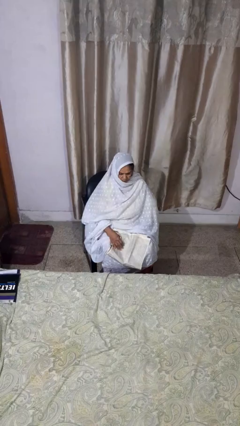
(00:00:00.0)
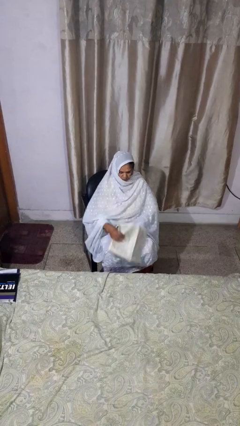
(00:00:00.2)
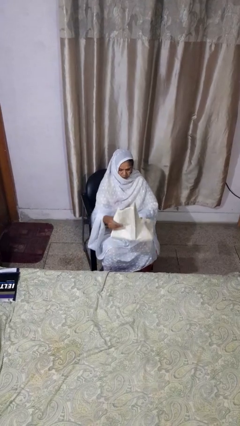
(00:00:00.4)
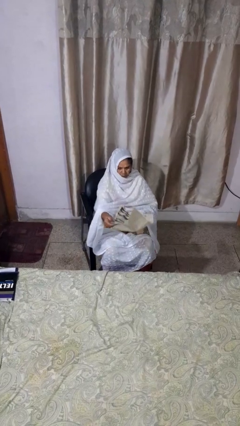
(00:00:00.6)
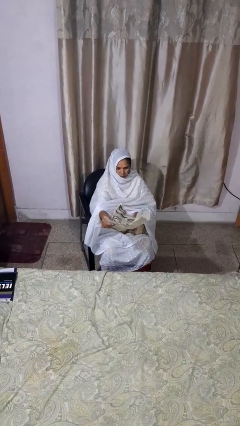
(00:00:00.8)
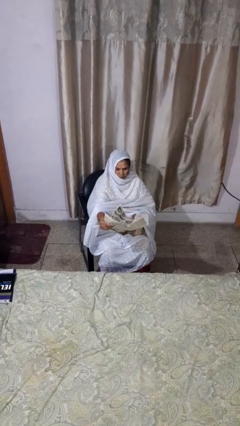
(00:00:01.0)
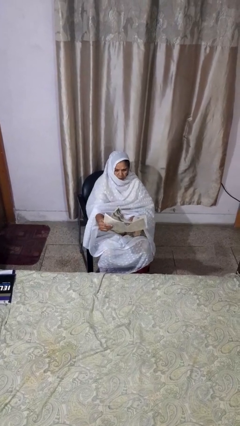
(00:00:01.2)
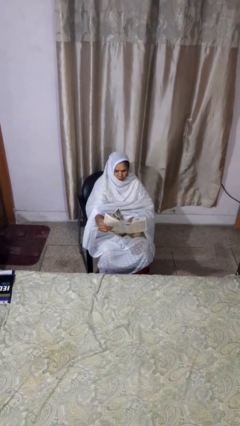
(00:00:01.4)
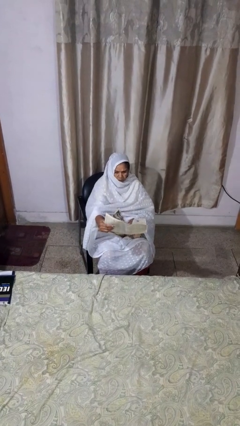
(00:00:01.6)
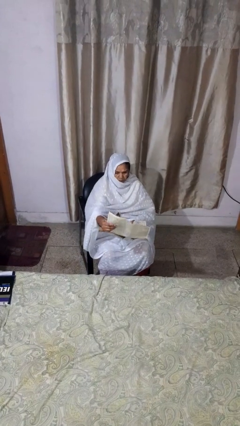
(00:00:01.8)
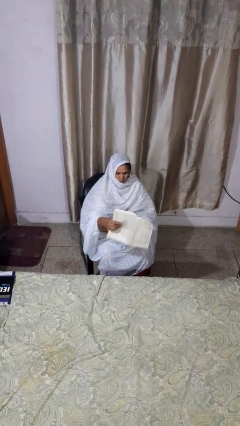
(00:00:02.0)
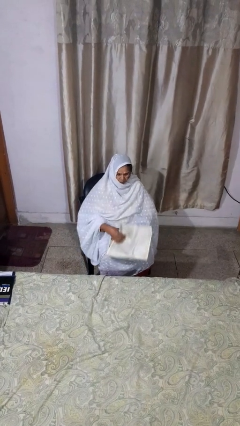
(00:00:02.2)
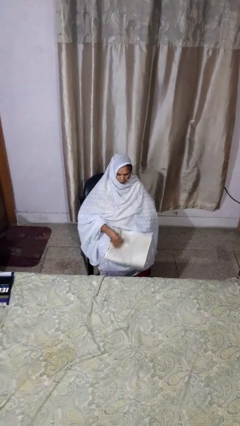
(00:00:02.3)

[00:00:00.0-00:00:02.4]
person reads newspaper

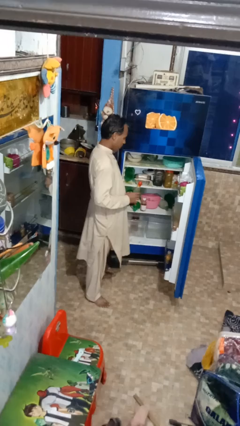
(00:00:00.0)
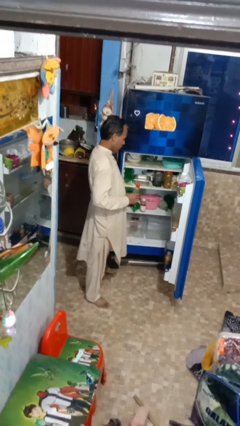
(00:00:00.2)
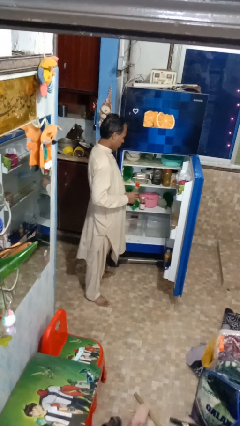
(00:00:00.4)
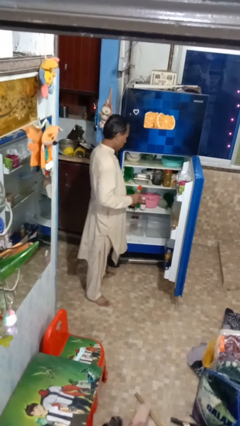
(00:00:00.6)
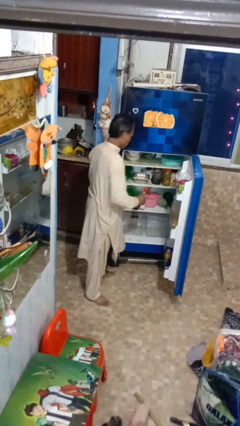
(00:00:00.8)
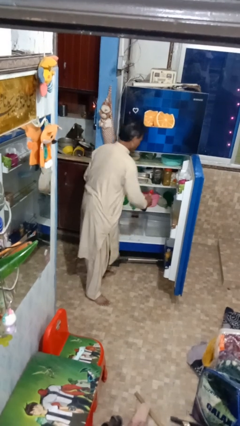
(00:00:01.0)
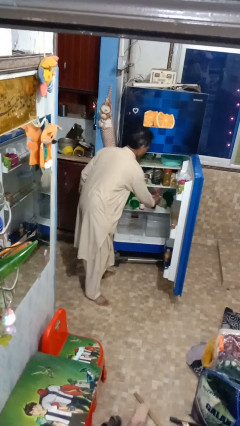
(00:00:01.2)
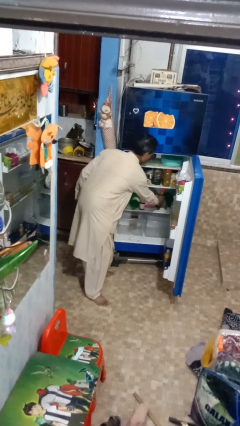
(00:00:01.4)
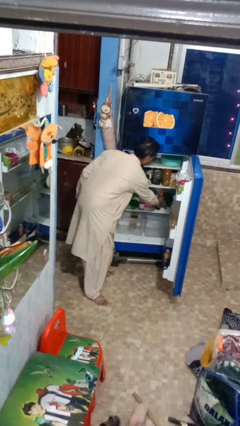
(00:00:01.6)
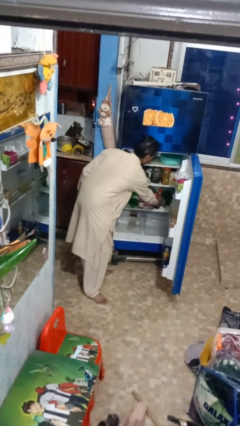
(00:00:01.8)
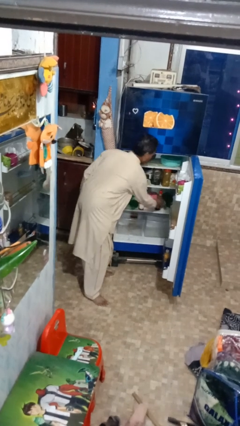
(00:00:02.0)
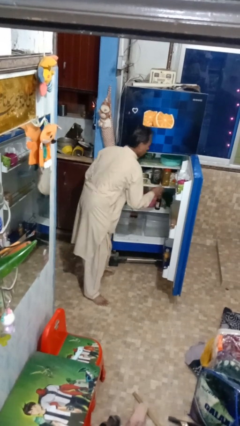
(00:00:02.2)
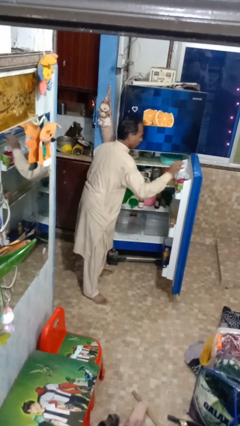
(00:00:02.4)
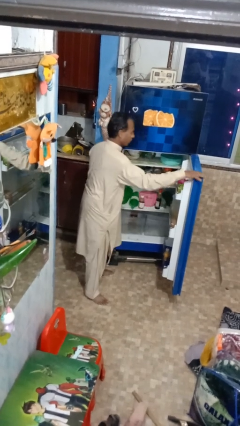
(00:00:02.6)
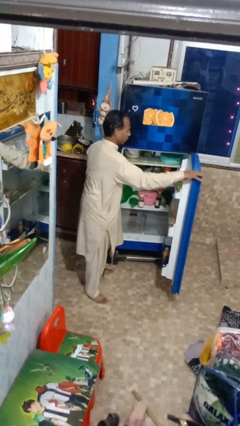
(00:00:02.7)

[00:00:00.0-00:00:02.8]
person takes object from refrigerator

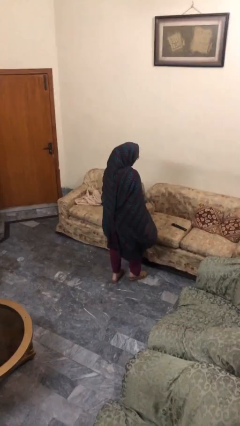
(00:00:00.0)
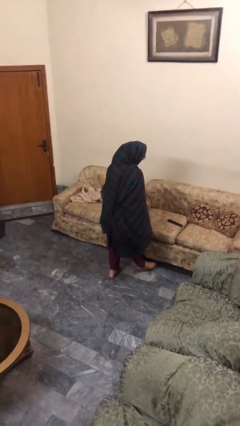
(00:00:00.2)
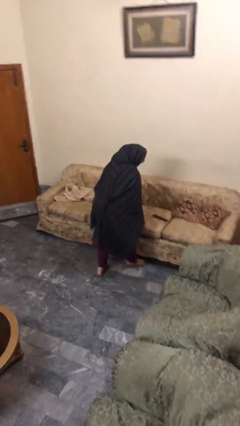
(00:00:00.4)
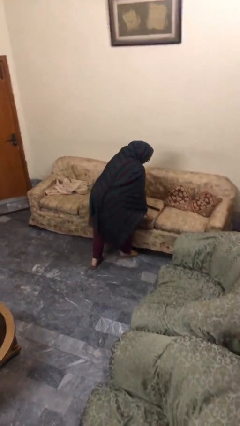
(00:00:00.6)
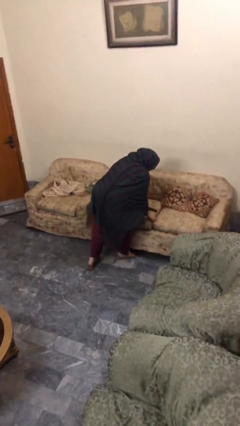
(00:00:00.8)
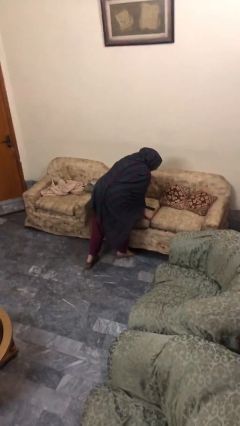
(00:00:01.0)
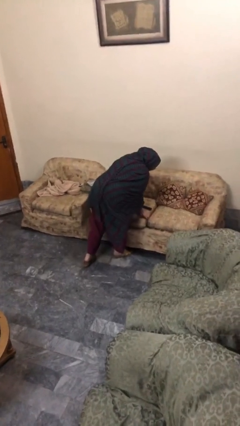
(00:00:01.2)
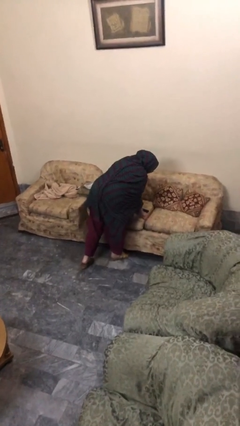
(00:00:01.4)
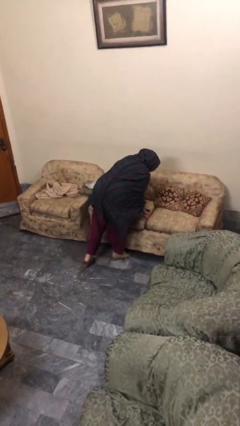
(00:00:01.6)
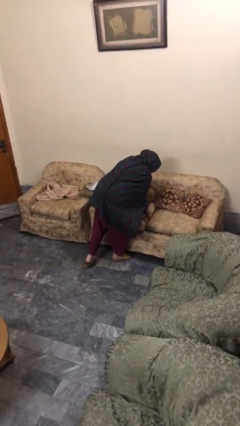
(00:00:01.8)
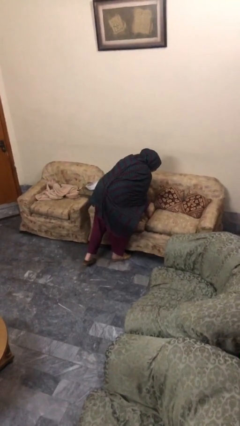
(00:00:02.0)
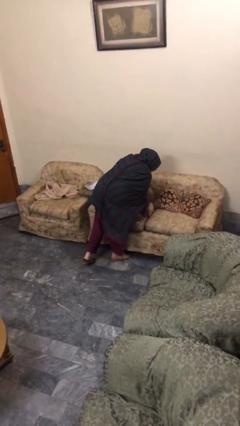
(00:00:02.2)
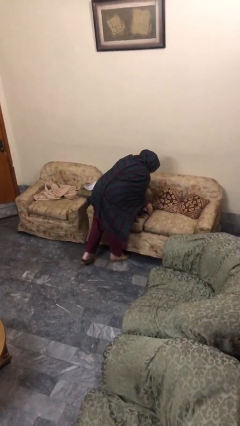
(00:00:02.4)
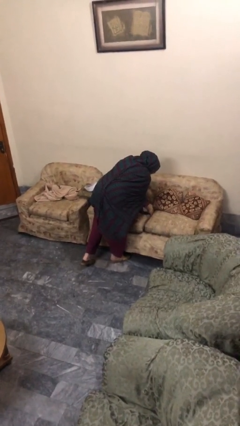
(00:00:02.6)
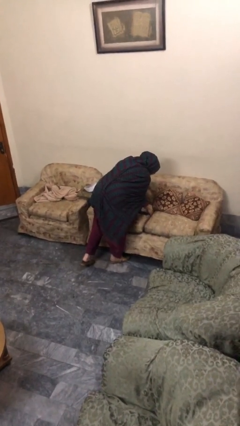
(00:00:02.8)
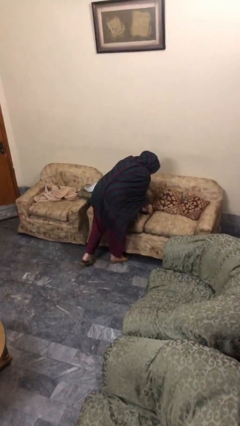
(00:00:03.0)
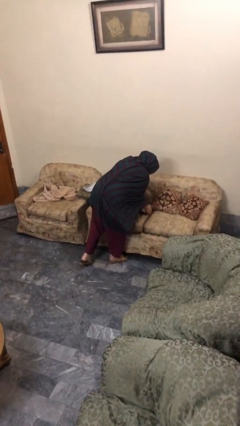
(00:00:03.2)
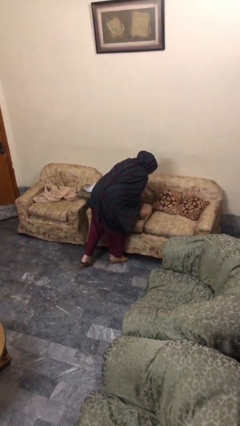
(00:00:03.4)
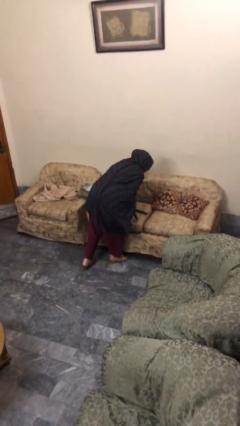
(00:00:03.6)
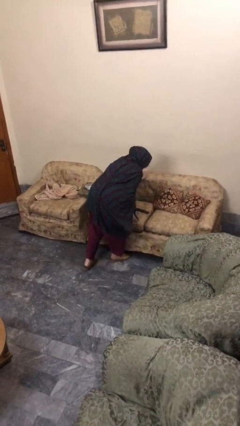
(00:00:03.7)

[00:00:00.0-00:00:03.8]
person searches in couch

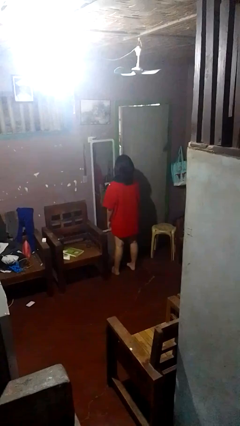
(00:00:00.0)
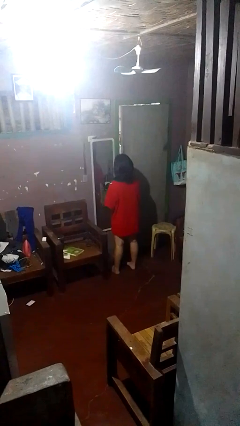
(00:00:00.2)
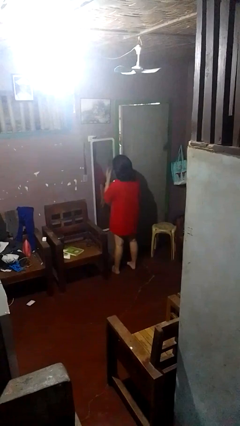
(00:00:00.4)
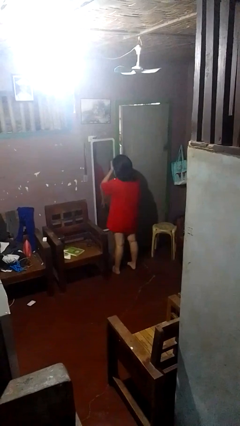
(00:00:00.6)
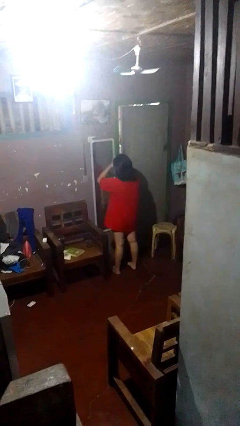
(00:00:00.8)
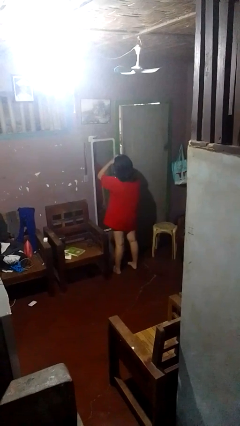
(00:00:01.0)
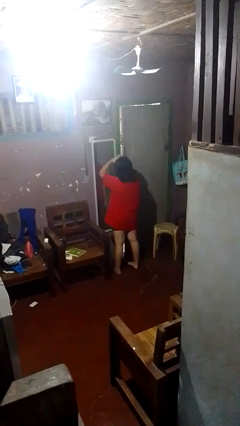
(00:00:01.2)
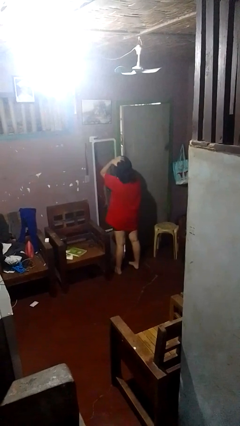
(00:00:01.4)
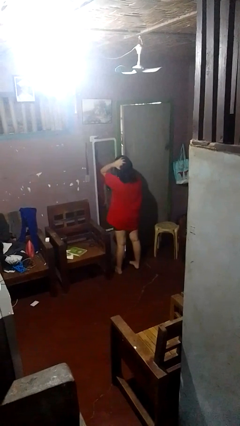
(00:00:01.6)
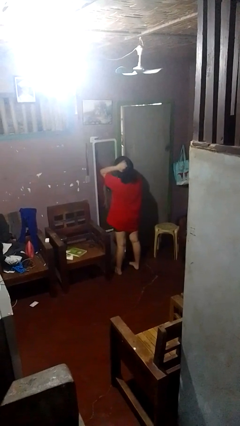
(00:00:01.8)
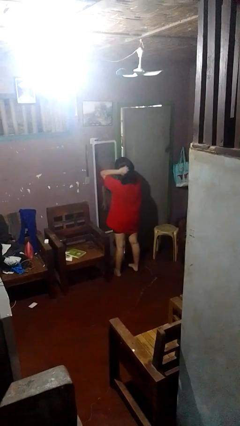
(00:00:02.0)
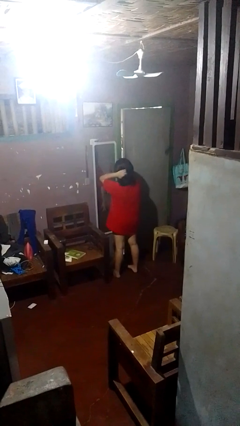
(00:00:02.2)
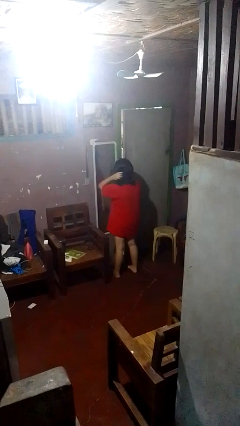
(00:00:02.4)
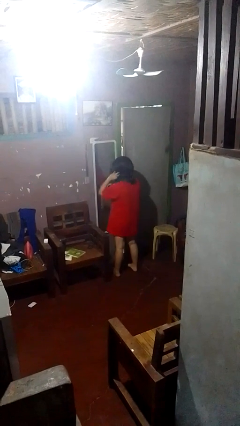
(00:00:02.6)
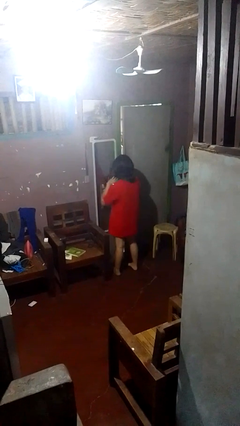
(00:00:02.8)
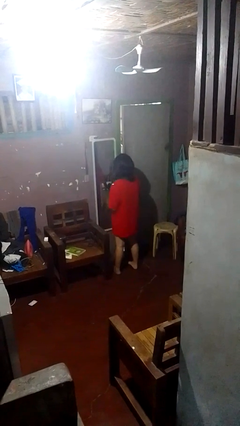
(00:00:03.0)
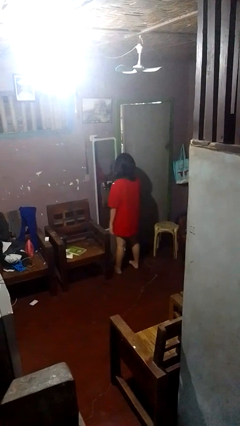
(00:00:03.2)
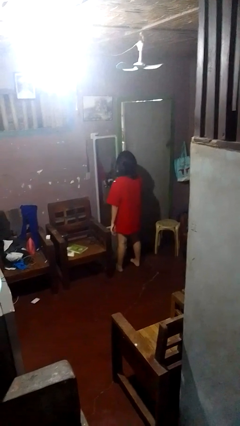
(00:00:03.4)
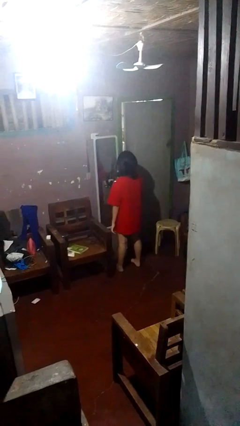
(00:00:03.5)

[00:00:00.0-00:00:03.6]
person strokes hair

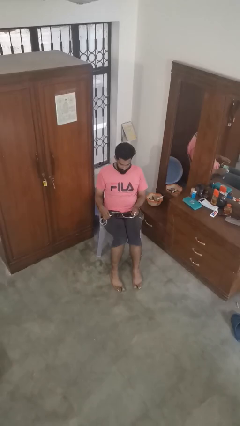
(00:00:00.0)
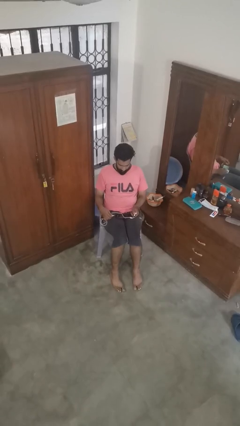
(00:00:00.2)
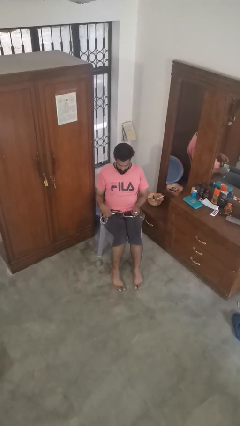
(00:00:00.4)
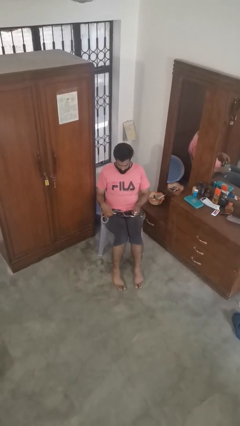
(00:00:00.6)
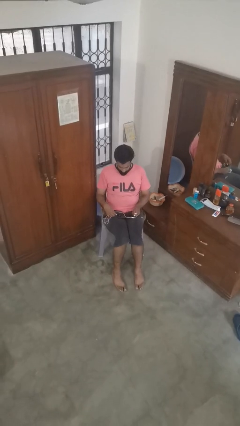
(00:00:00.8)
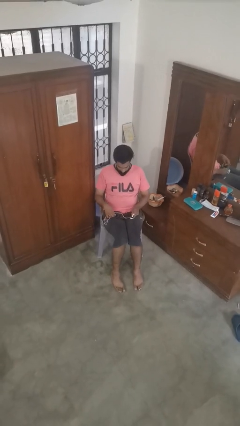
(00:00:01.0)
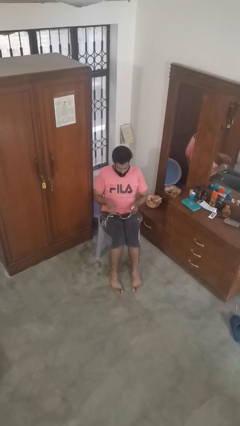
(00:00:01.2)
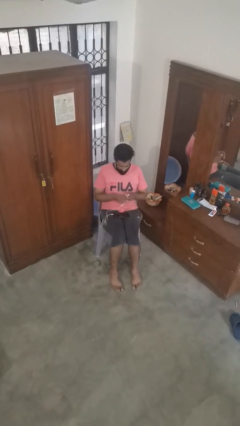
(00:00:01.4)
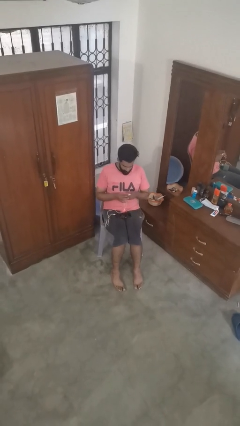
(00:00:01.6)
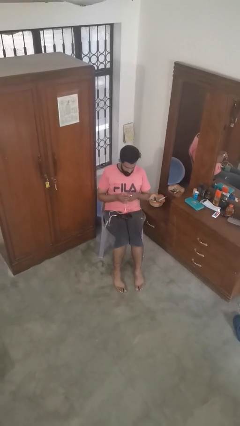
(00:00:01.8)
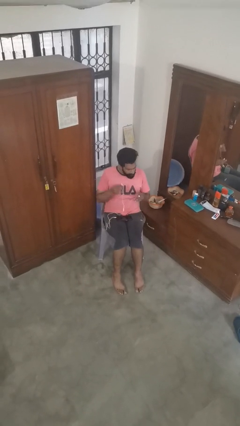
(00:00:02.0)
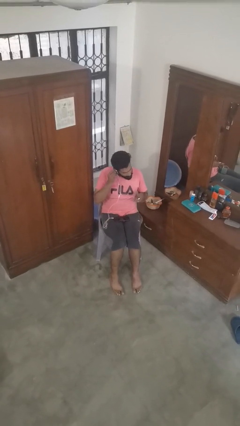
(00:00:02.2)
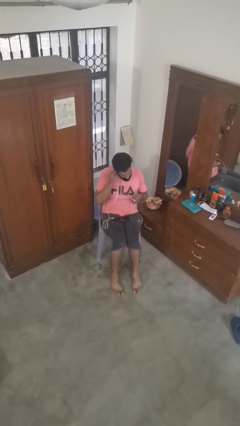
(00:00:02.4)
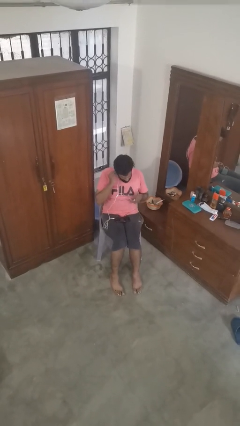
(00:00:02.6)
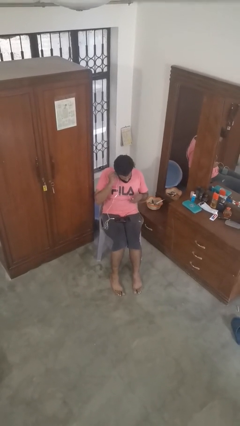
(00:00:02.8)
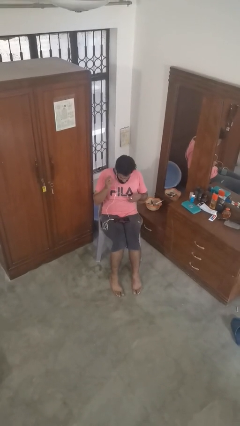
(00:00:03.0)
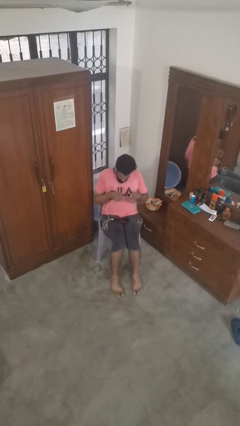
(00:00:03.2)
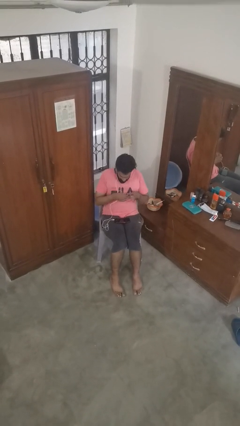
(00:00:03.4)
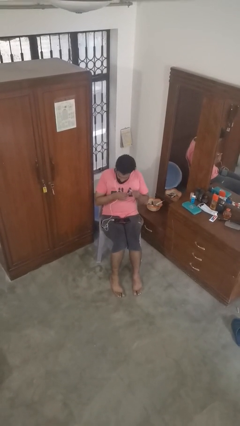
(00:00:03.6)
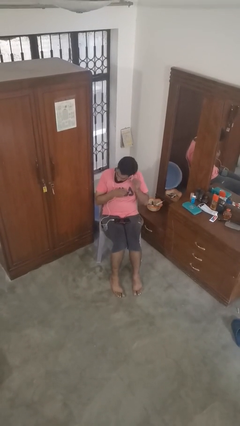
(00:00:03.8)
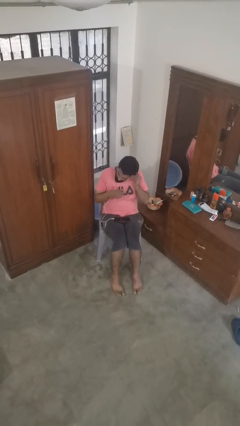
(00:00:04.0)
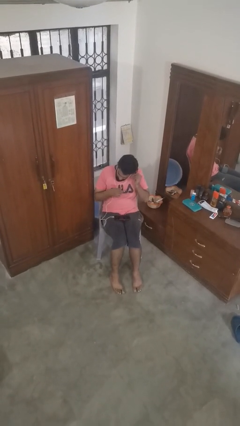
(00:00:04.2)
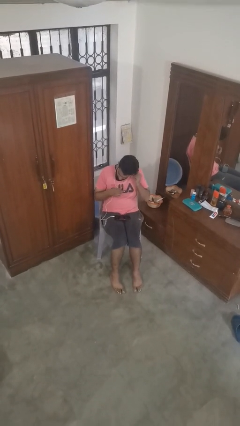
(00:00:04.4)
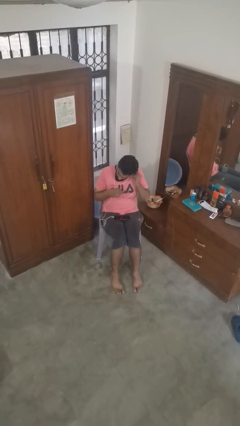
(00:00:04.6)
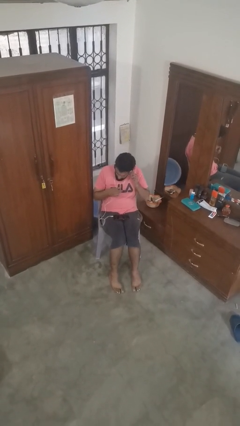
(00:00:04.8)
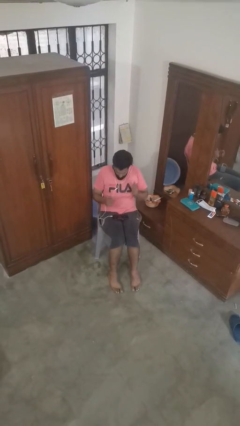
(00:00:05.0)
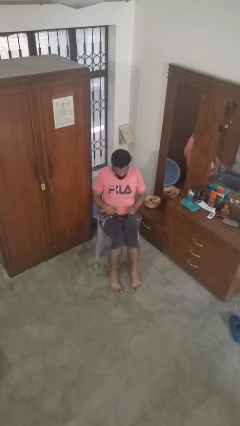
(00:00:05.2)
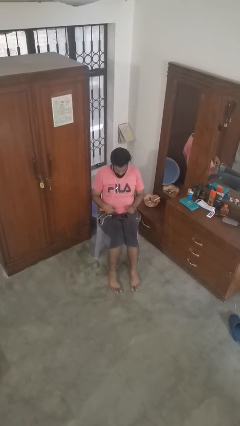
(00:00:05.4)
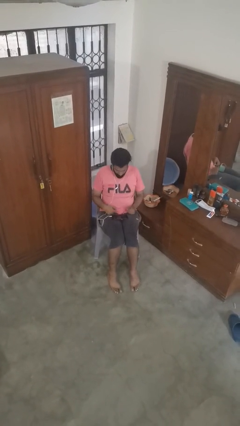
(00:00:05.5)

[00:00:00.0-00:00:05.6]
person puts on headphones
